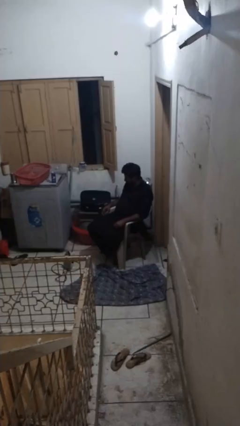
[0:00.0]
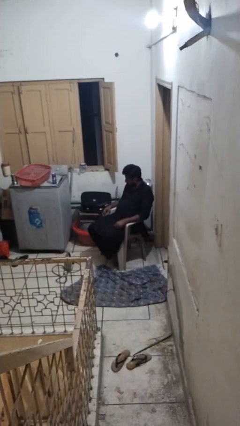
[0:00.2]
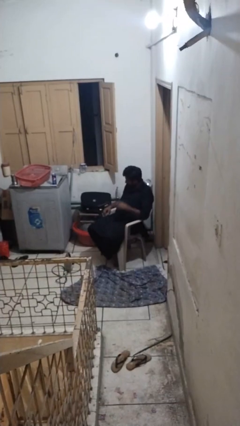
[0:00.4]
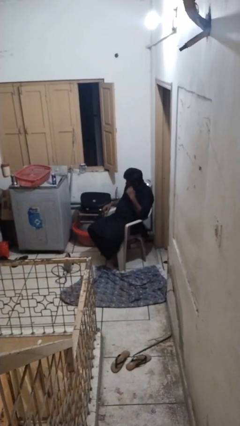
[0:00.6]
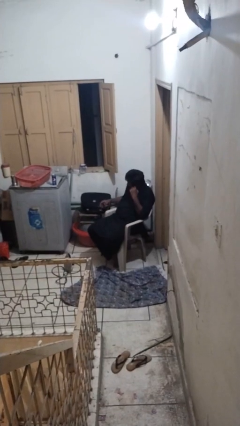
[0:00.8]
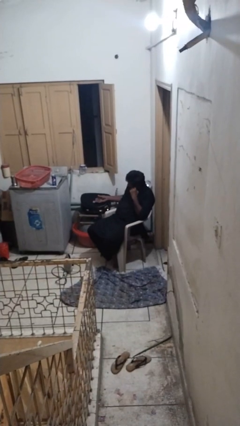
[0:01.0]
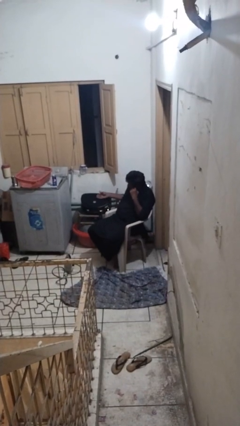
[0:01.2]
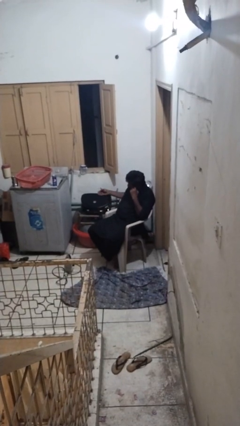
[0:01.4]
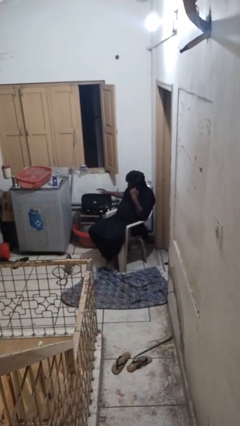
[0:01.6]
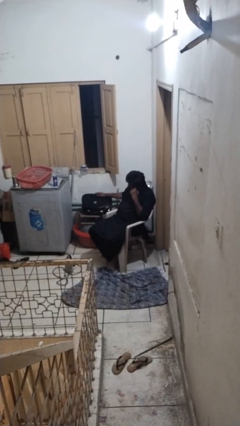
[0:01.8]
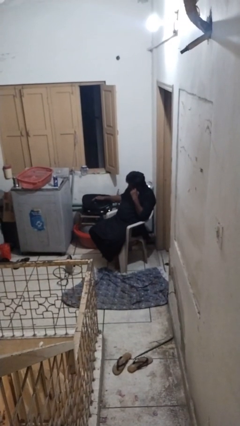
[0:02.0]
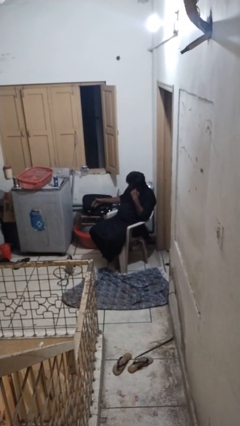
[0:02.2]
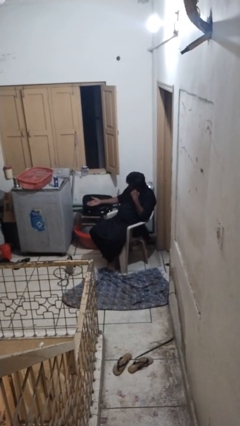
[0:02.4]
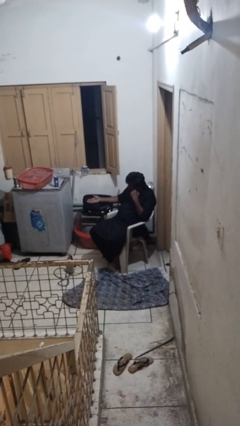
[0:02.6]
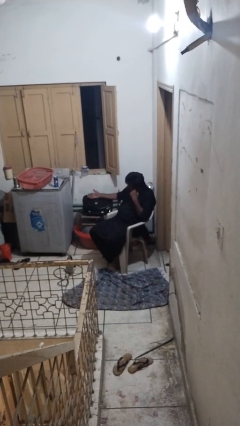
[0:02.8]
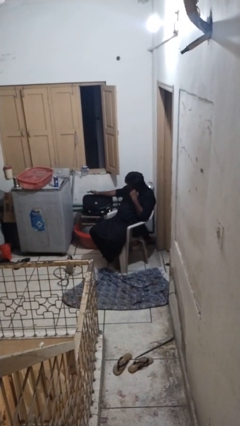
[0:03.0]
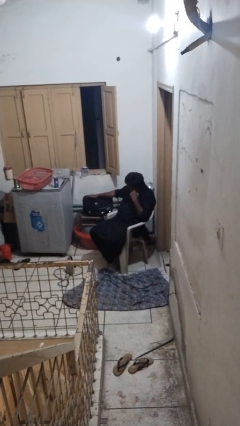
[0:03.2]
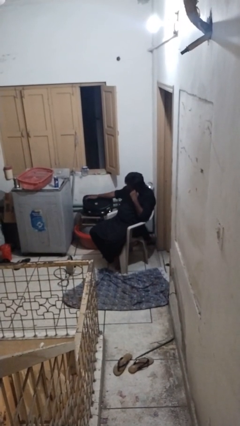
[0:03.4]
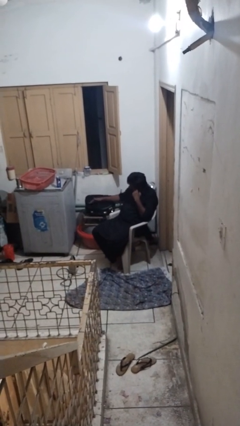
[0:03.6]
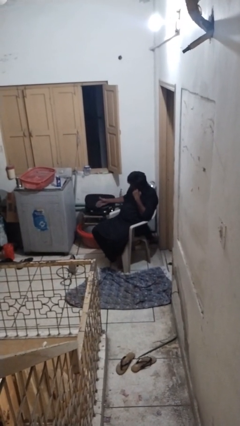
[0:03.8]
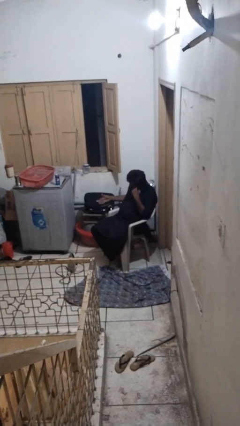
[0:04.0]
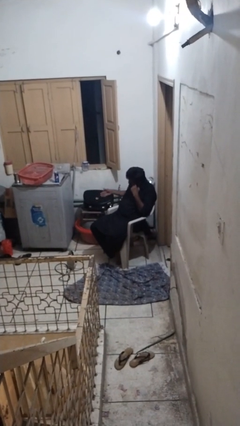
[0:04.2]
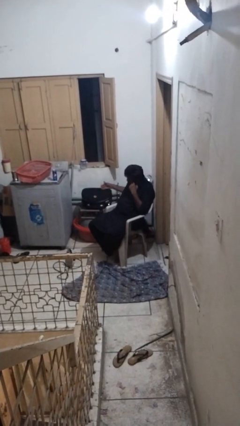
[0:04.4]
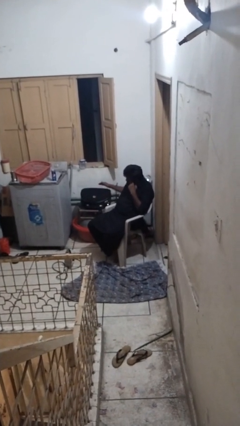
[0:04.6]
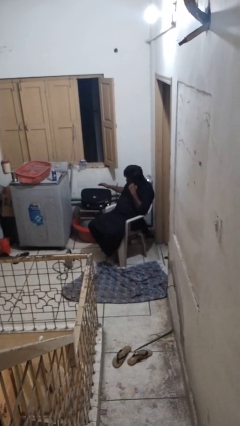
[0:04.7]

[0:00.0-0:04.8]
person waves hand over object

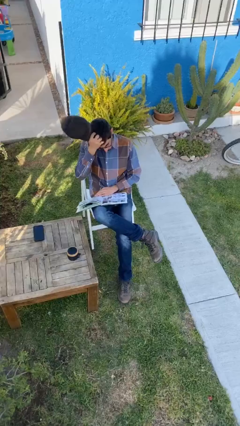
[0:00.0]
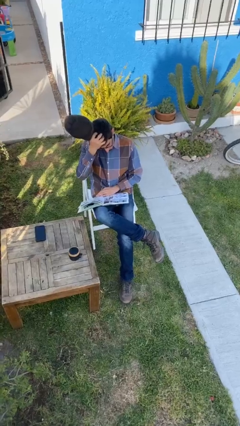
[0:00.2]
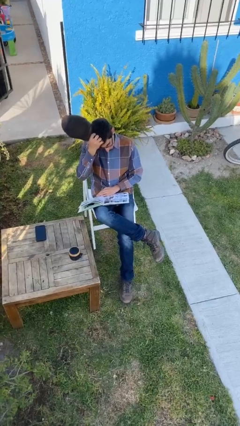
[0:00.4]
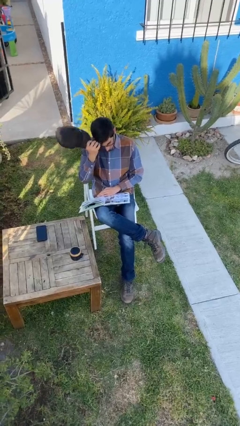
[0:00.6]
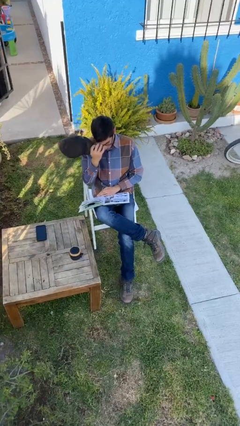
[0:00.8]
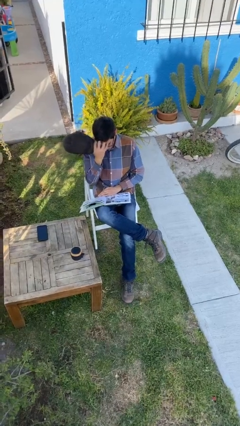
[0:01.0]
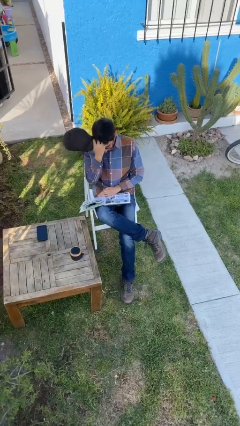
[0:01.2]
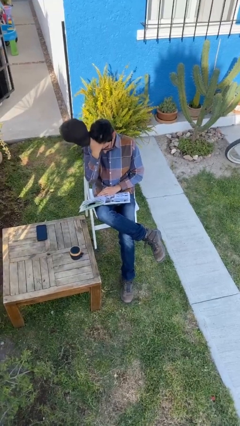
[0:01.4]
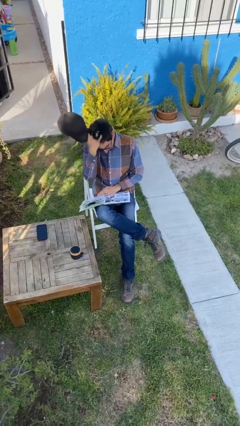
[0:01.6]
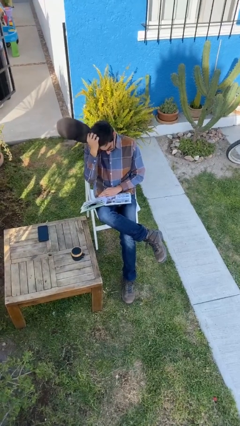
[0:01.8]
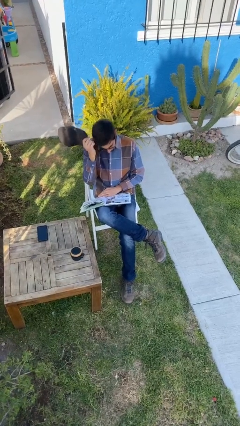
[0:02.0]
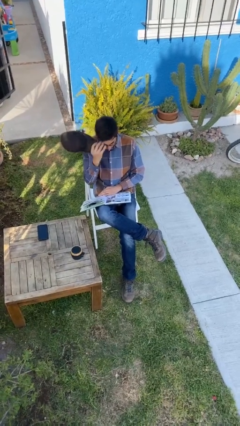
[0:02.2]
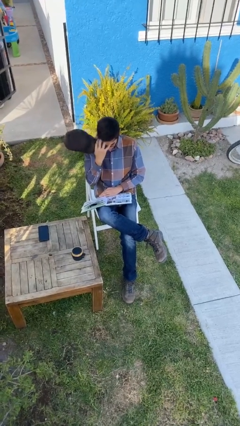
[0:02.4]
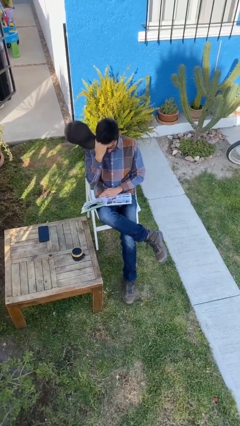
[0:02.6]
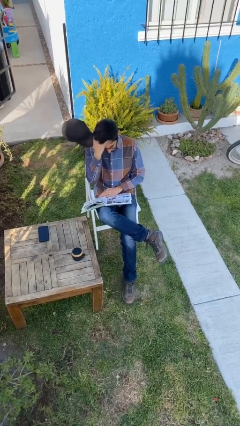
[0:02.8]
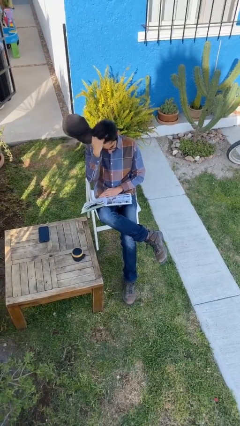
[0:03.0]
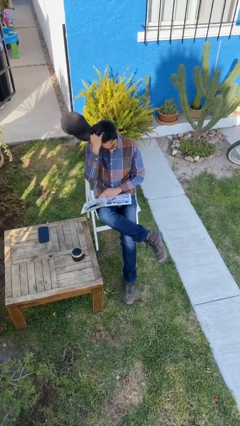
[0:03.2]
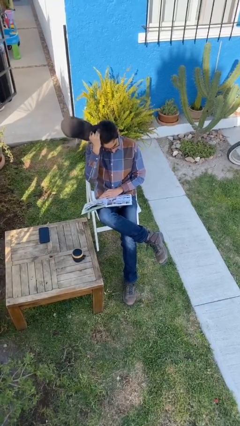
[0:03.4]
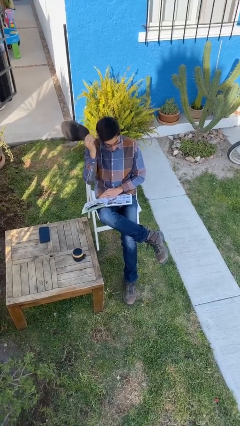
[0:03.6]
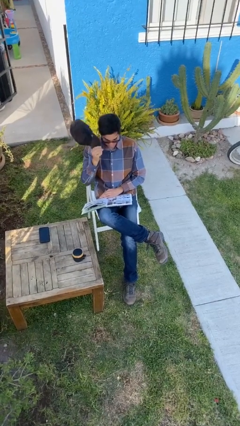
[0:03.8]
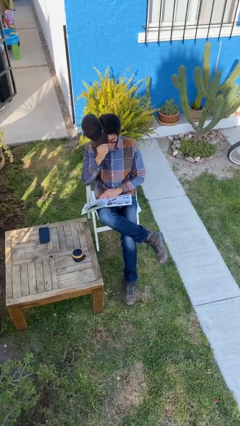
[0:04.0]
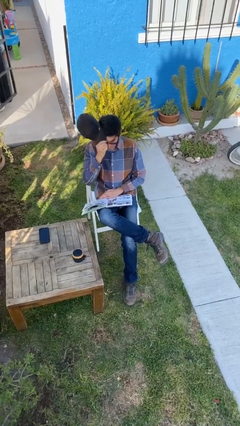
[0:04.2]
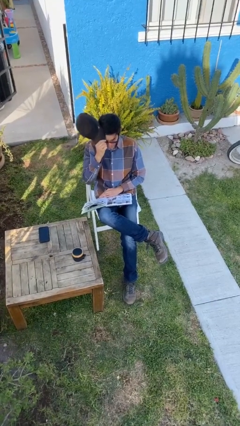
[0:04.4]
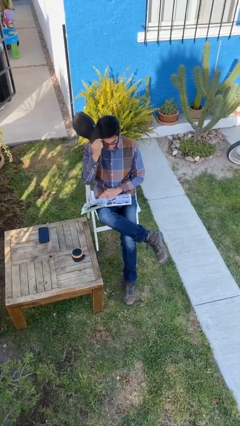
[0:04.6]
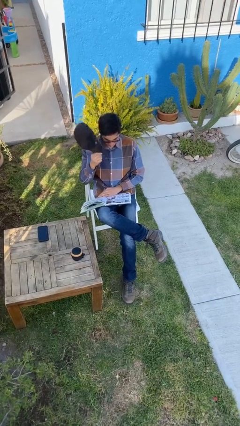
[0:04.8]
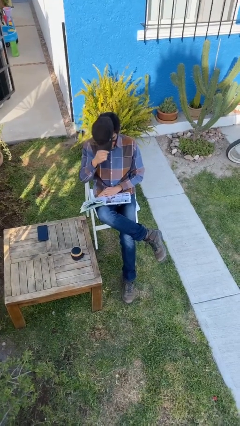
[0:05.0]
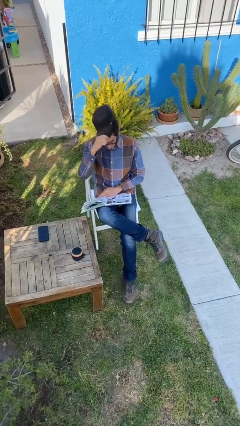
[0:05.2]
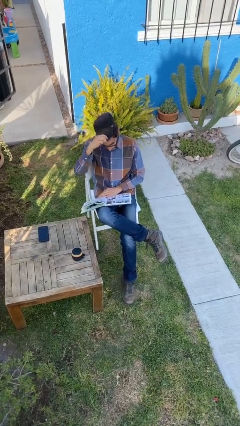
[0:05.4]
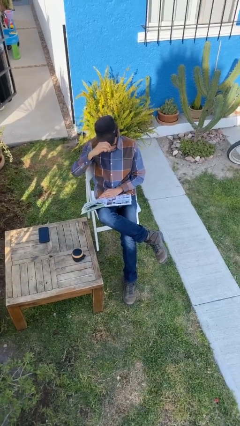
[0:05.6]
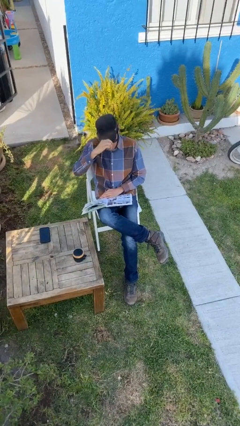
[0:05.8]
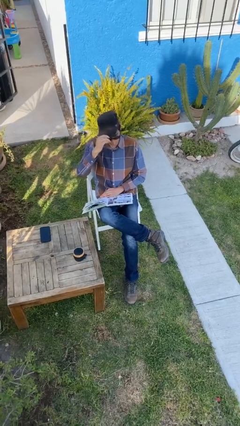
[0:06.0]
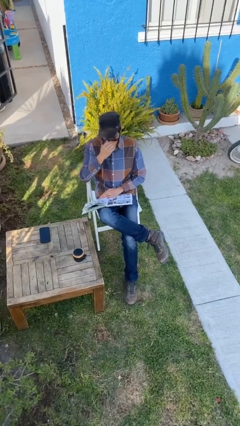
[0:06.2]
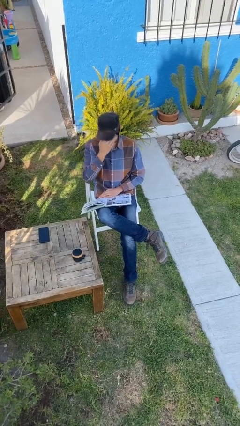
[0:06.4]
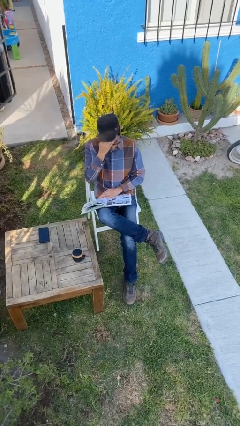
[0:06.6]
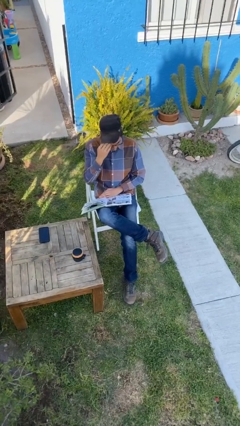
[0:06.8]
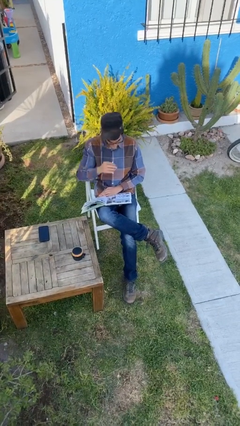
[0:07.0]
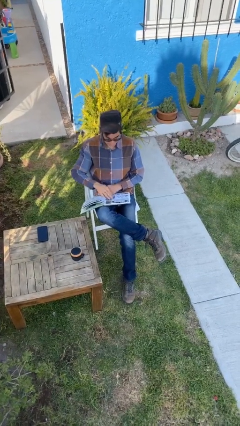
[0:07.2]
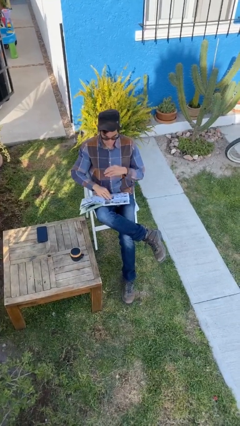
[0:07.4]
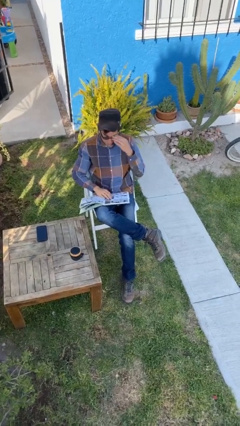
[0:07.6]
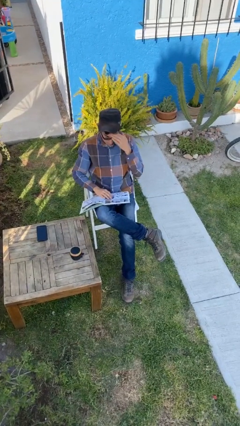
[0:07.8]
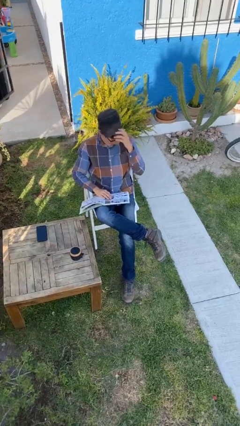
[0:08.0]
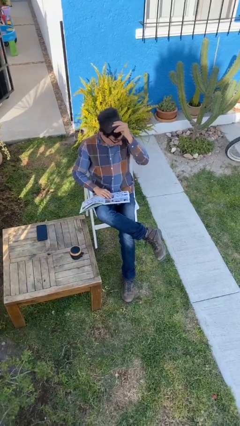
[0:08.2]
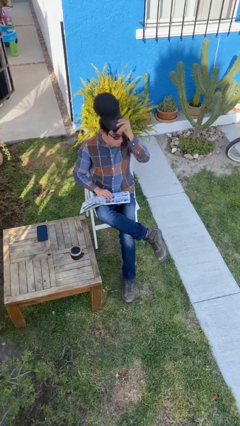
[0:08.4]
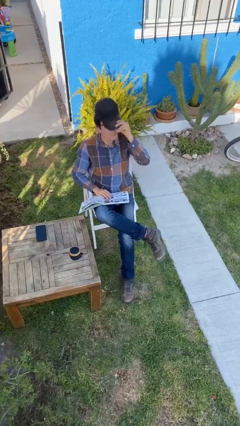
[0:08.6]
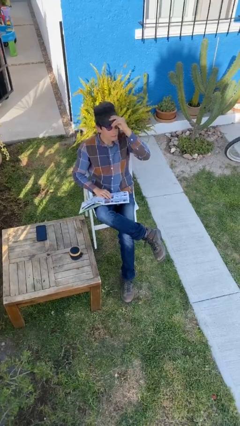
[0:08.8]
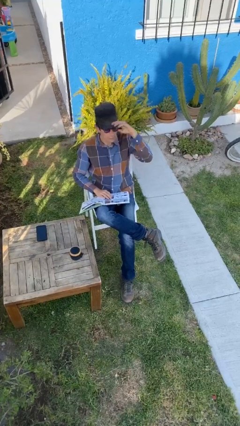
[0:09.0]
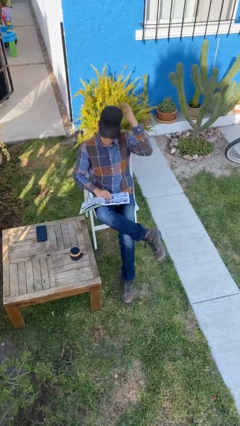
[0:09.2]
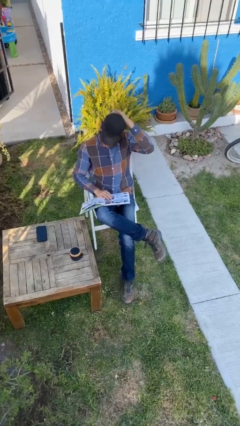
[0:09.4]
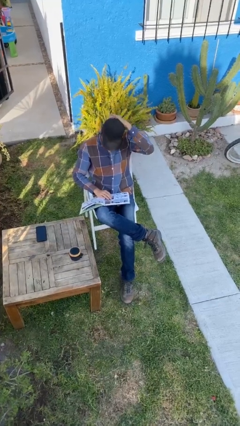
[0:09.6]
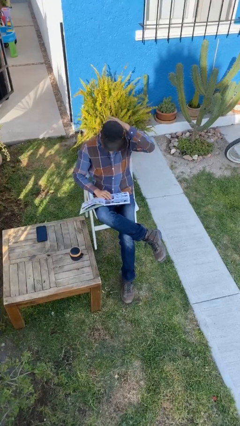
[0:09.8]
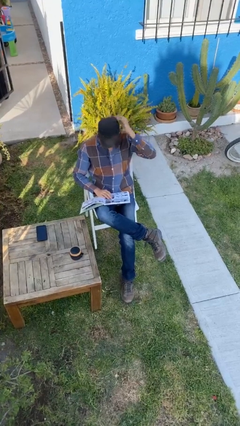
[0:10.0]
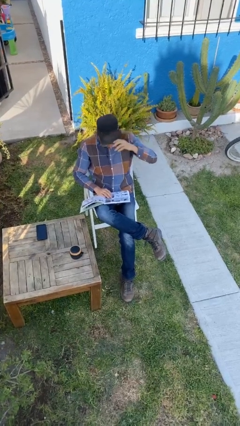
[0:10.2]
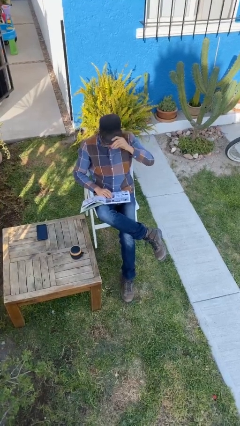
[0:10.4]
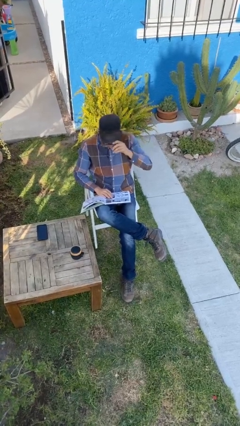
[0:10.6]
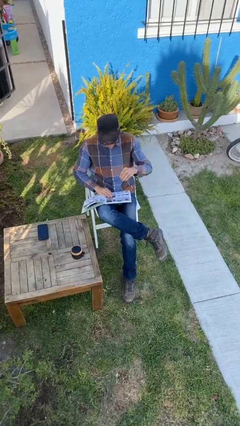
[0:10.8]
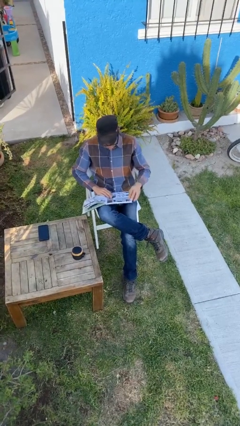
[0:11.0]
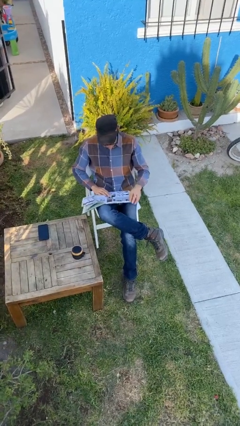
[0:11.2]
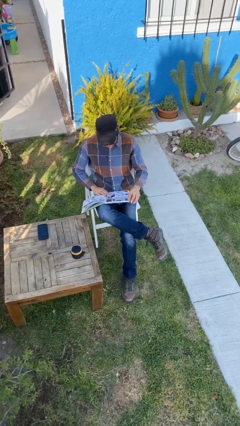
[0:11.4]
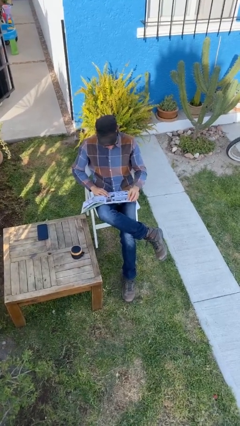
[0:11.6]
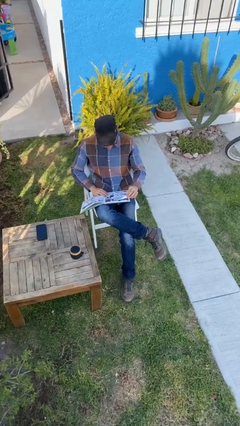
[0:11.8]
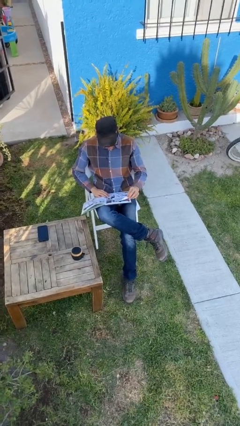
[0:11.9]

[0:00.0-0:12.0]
person reads document

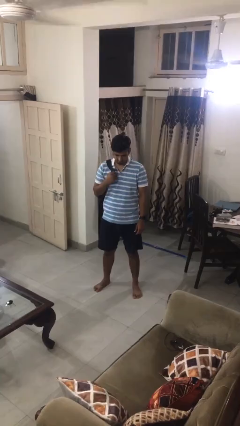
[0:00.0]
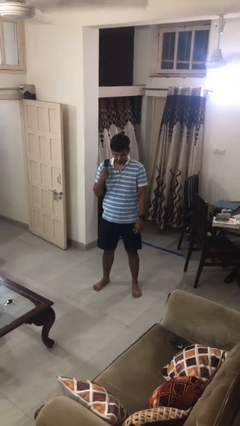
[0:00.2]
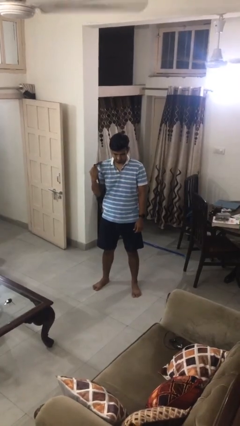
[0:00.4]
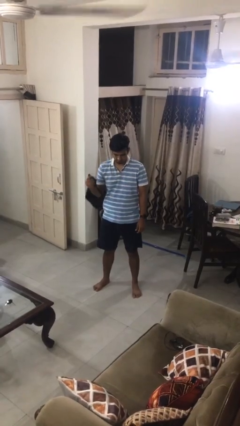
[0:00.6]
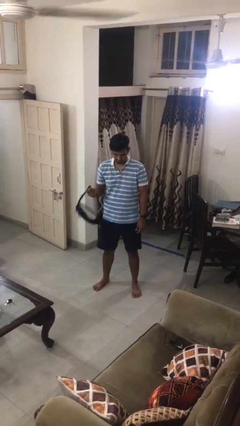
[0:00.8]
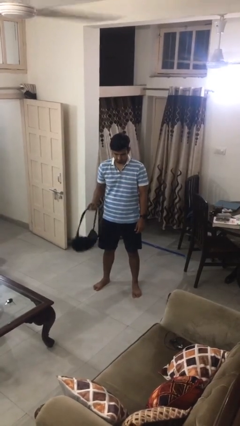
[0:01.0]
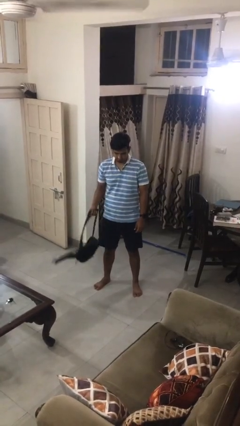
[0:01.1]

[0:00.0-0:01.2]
person takes off backpack

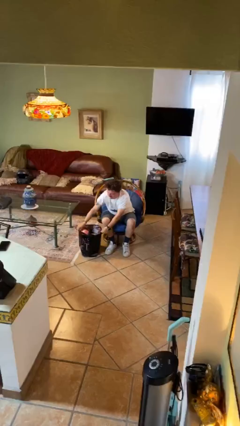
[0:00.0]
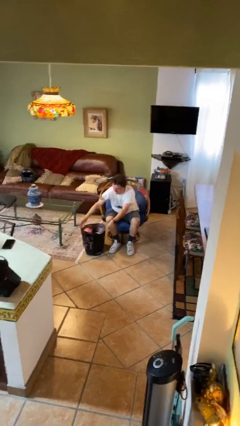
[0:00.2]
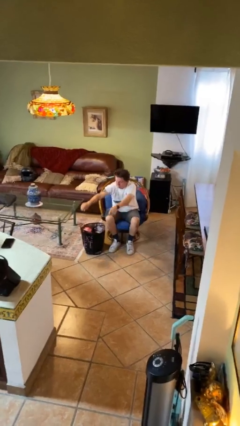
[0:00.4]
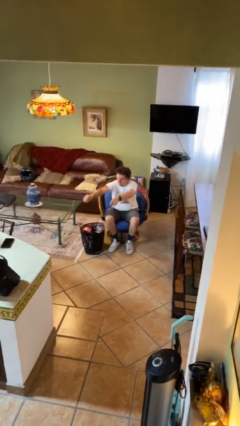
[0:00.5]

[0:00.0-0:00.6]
person puts down object on floor
